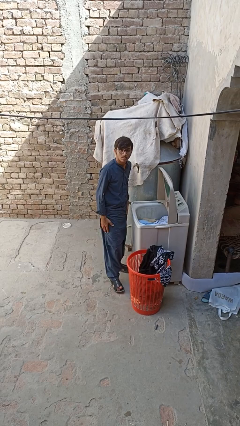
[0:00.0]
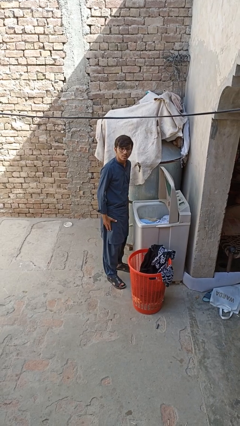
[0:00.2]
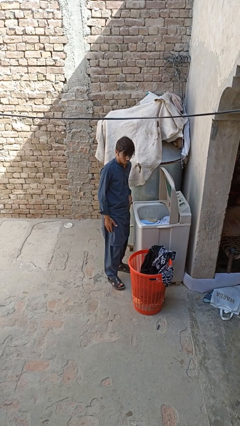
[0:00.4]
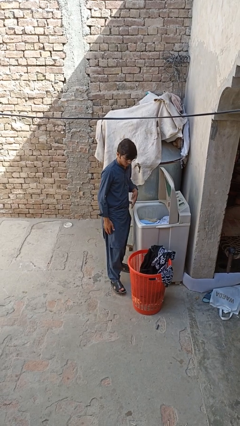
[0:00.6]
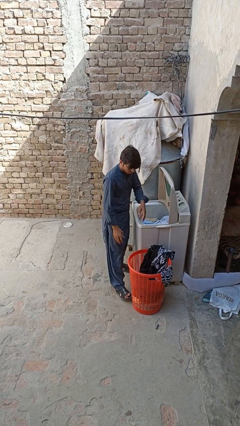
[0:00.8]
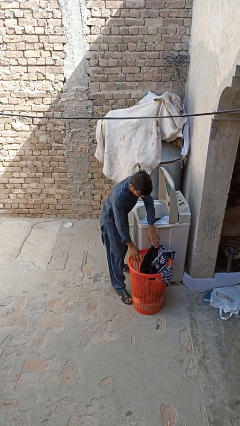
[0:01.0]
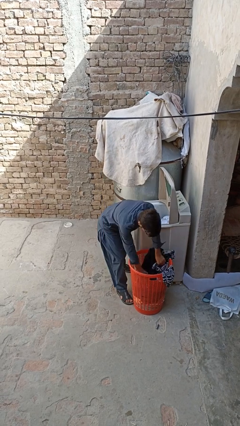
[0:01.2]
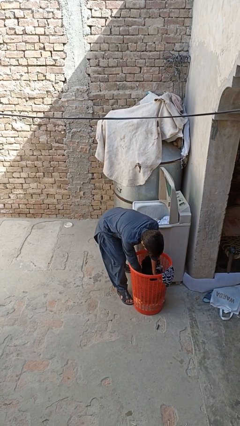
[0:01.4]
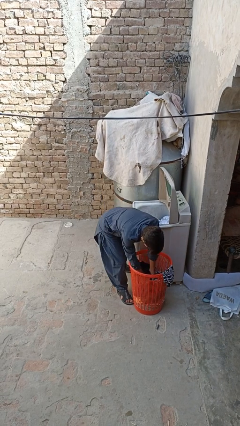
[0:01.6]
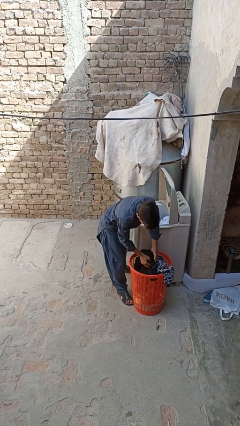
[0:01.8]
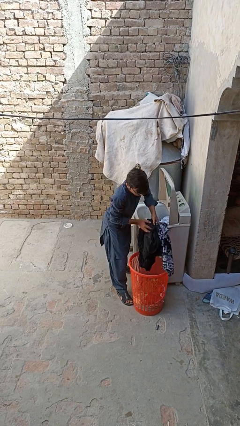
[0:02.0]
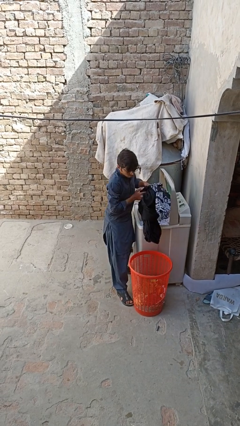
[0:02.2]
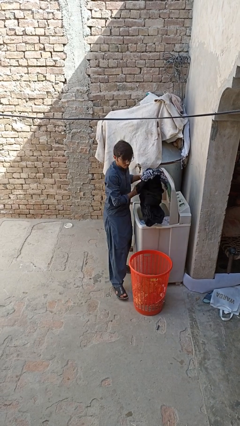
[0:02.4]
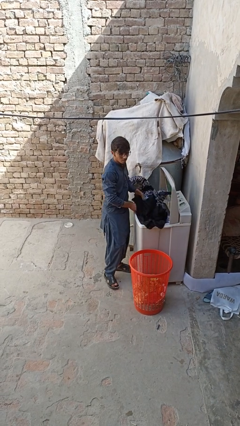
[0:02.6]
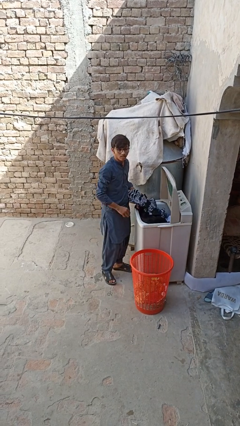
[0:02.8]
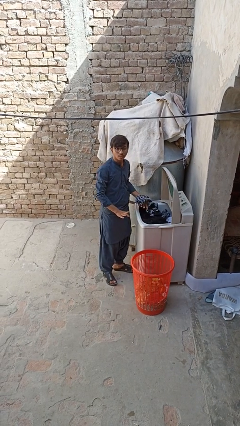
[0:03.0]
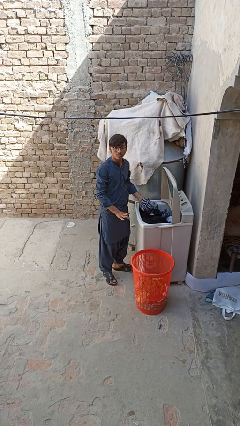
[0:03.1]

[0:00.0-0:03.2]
person loads clotheswasher

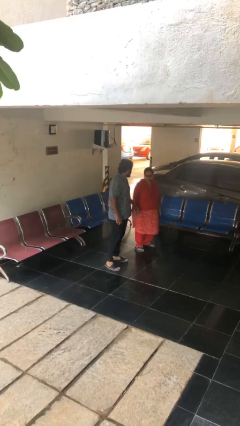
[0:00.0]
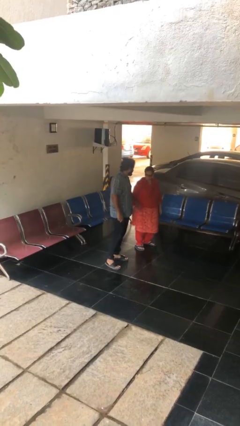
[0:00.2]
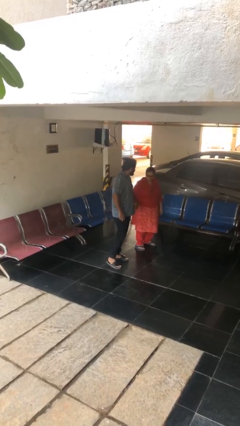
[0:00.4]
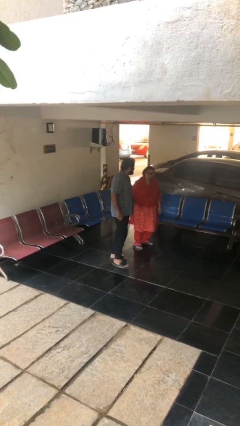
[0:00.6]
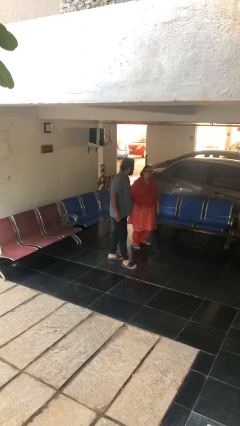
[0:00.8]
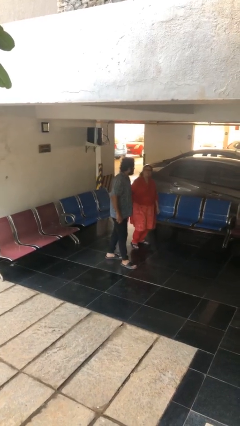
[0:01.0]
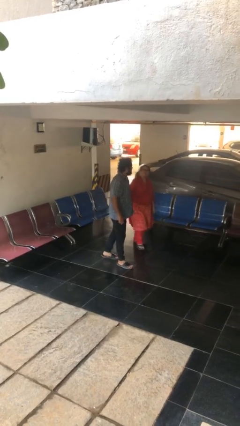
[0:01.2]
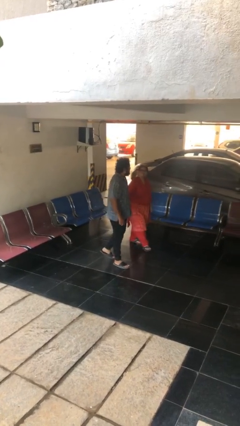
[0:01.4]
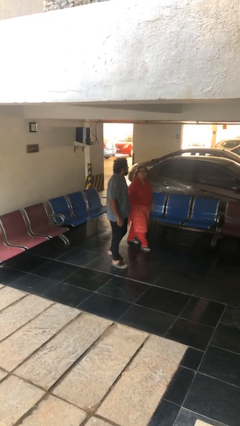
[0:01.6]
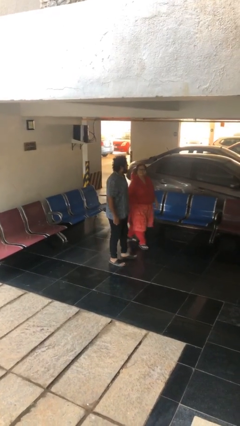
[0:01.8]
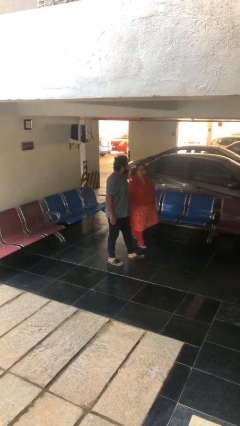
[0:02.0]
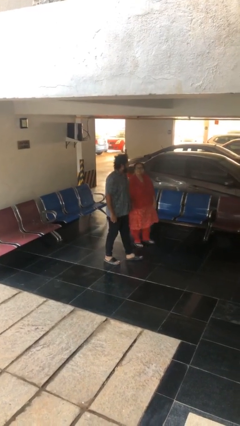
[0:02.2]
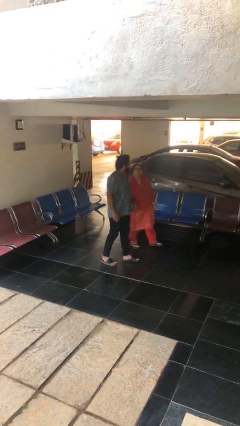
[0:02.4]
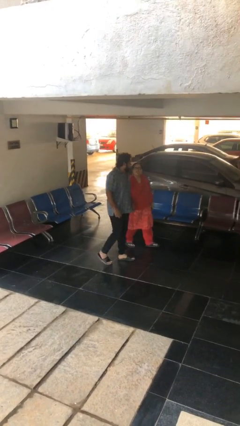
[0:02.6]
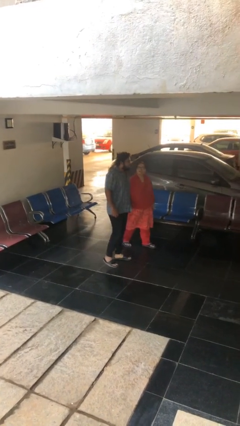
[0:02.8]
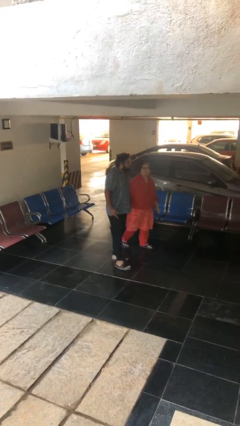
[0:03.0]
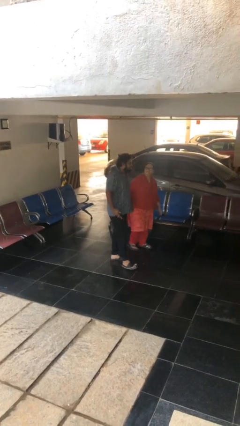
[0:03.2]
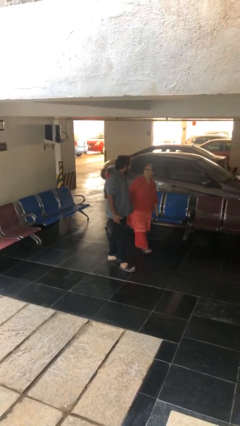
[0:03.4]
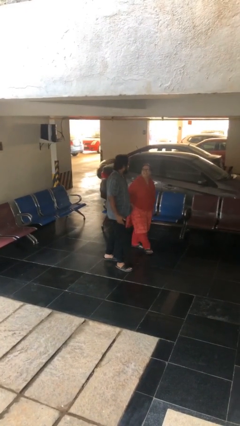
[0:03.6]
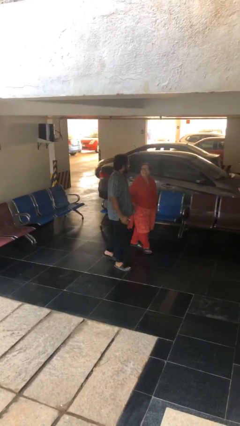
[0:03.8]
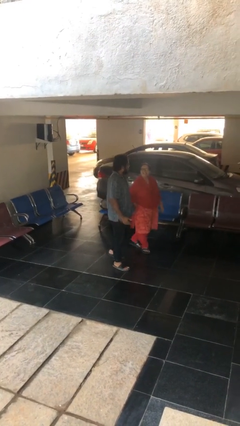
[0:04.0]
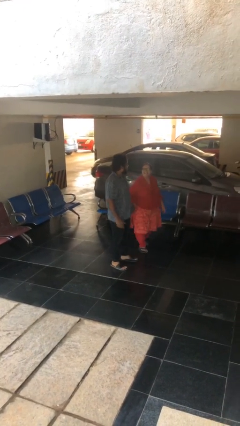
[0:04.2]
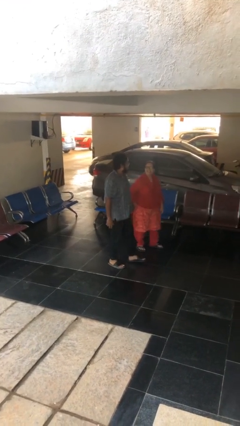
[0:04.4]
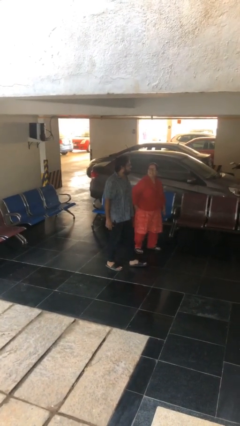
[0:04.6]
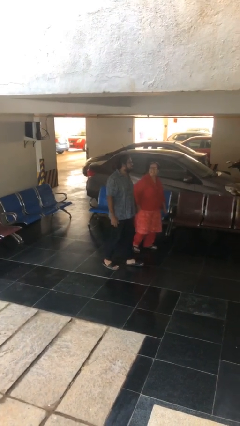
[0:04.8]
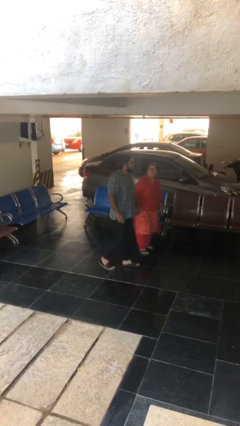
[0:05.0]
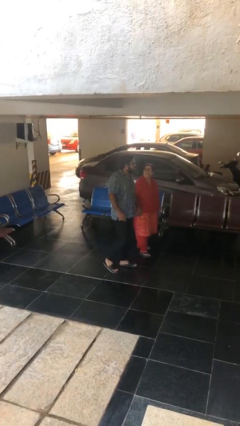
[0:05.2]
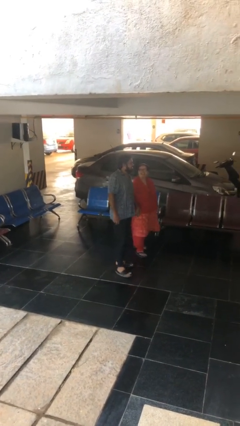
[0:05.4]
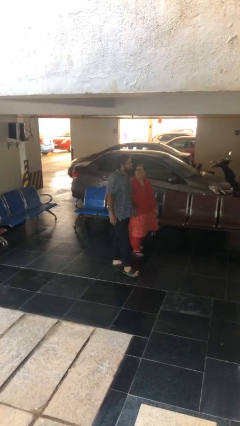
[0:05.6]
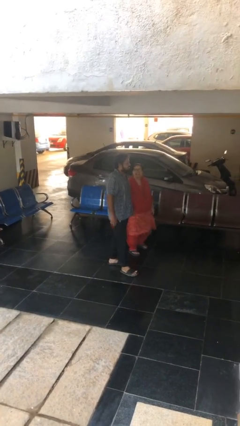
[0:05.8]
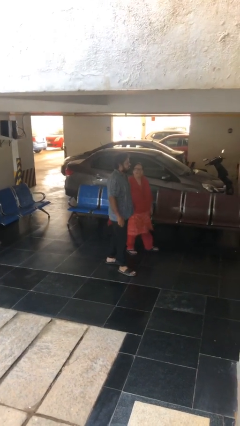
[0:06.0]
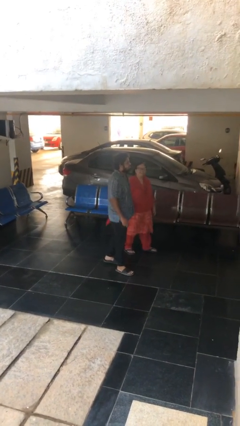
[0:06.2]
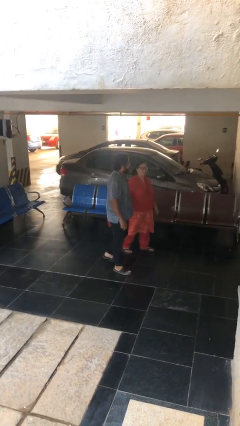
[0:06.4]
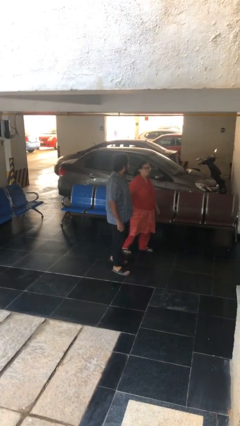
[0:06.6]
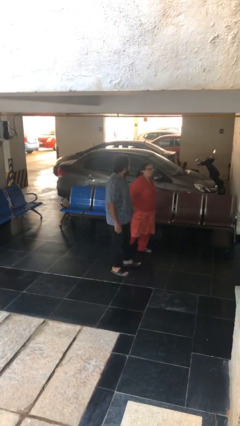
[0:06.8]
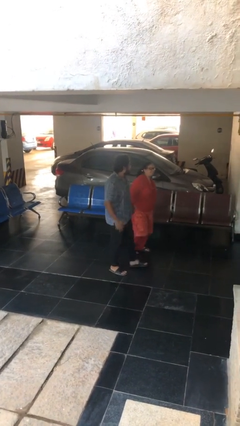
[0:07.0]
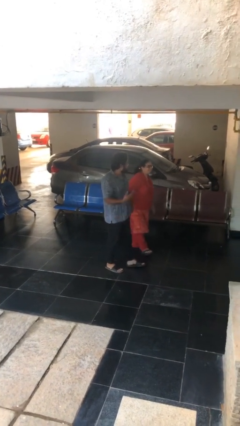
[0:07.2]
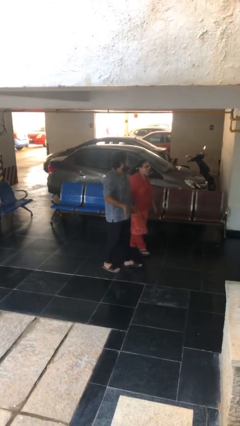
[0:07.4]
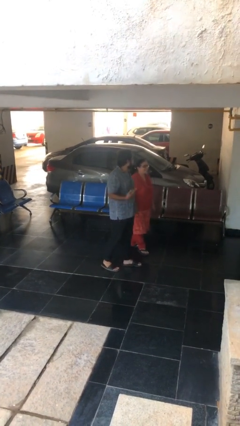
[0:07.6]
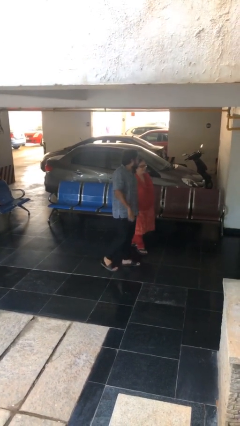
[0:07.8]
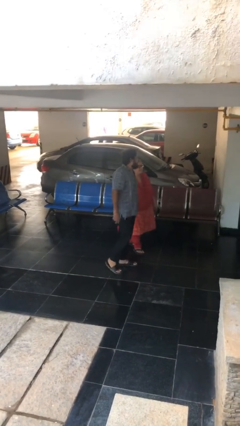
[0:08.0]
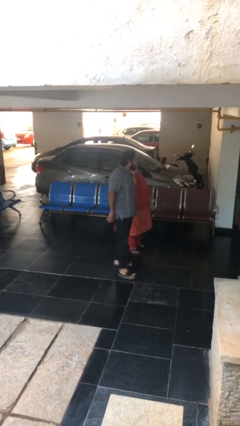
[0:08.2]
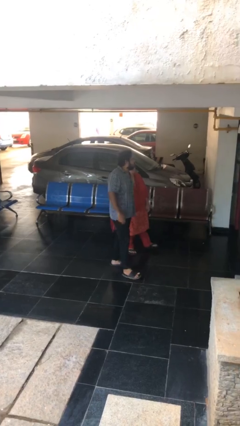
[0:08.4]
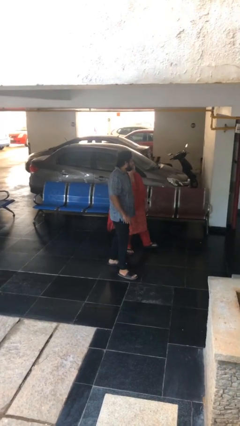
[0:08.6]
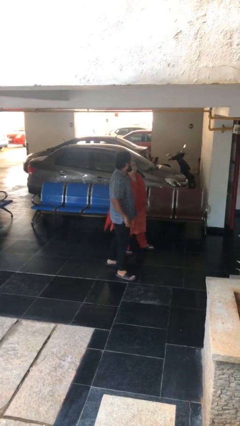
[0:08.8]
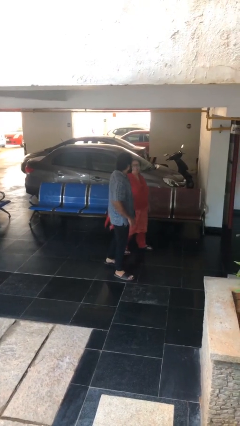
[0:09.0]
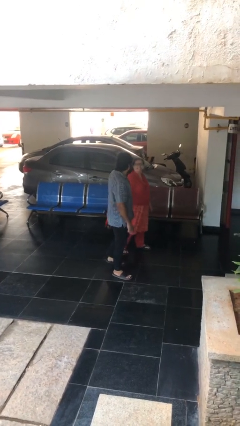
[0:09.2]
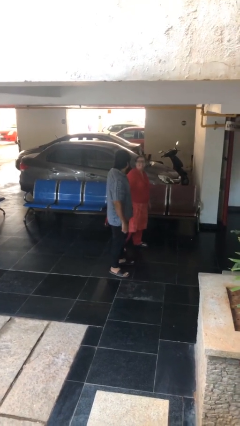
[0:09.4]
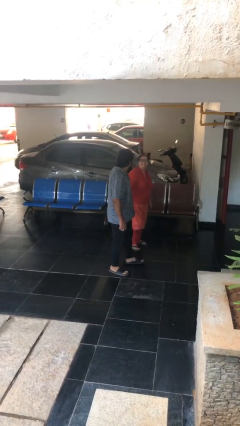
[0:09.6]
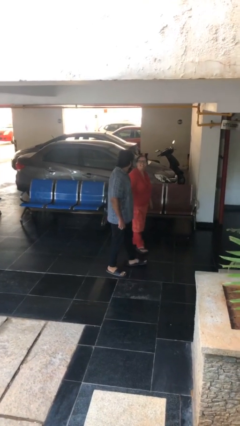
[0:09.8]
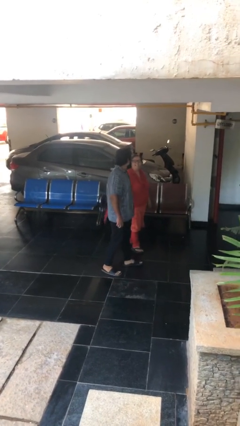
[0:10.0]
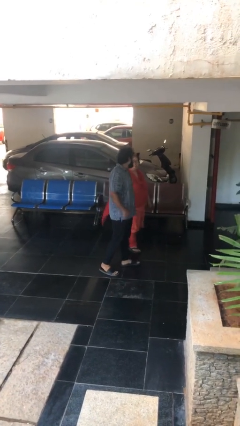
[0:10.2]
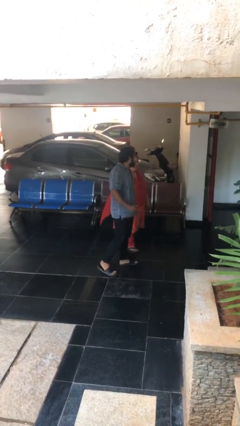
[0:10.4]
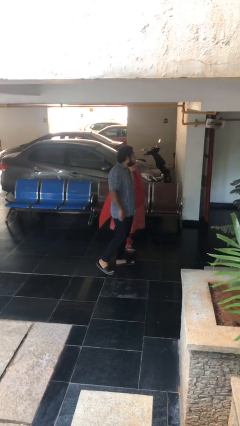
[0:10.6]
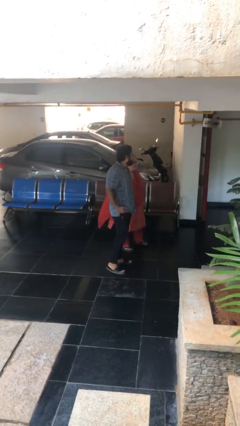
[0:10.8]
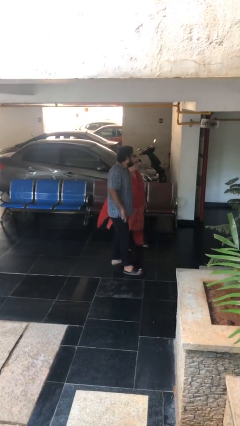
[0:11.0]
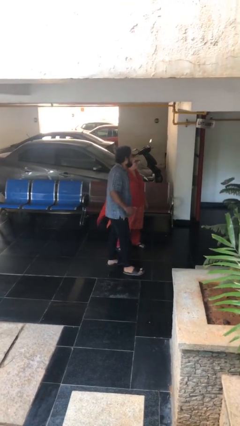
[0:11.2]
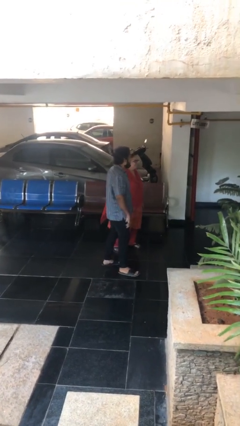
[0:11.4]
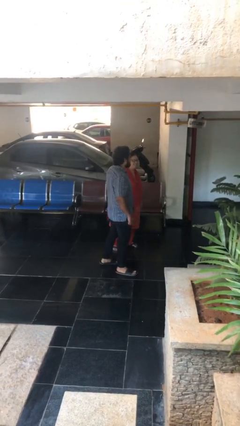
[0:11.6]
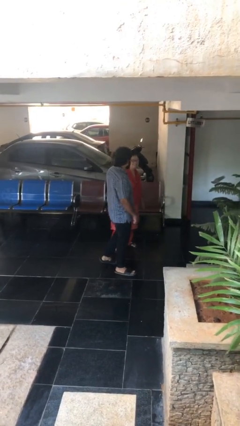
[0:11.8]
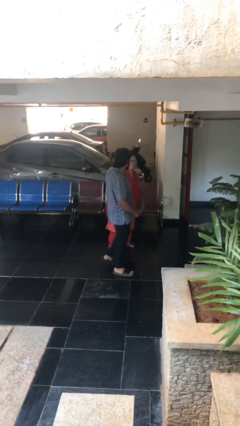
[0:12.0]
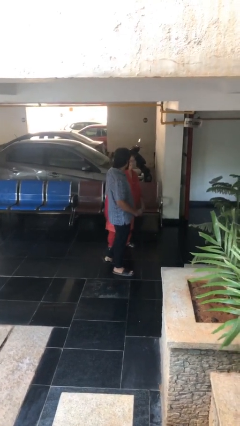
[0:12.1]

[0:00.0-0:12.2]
person holds hand

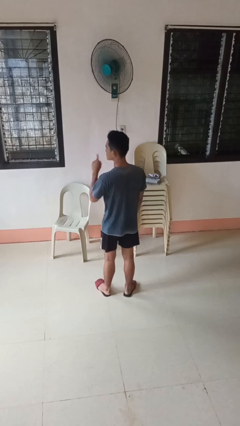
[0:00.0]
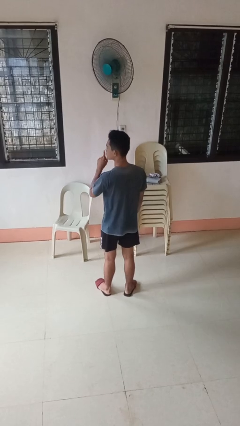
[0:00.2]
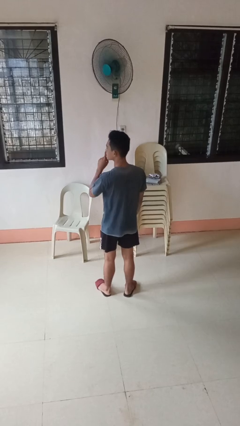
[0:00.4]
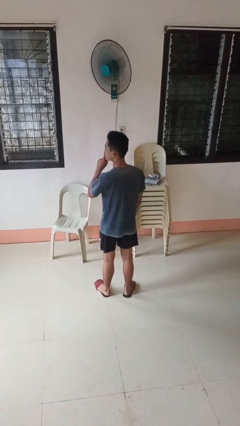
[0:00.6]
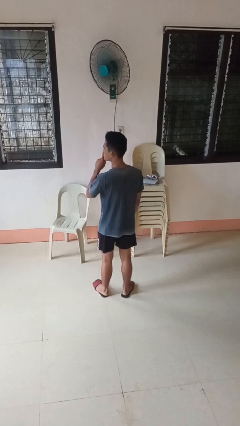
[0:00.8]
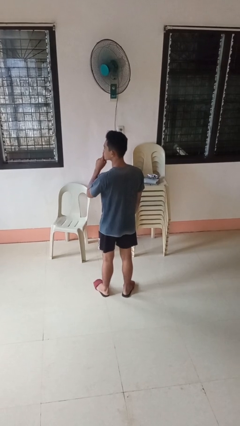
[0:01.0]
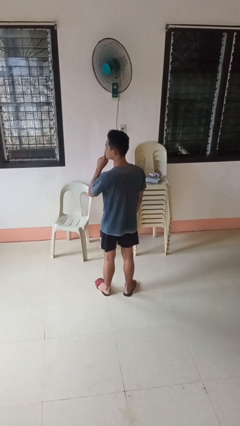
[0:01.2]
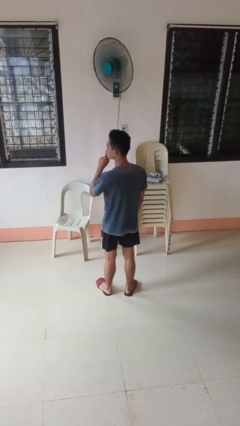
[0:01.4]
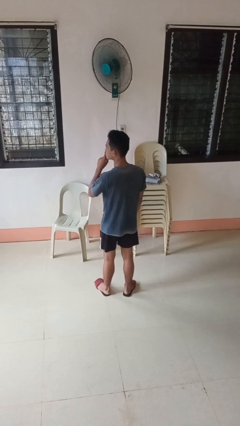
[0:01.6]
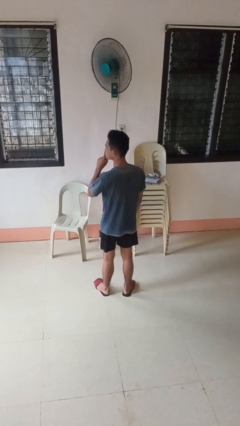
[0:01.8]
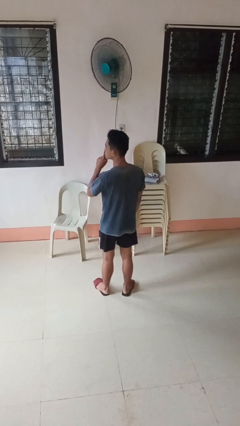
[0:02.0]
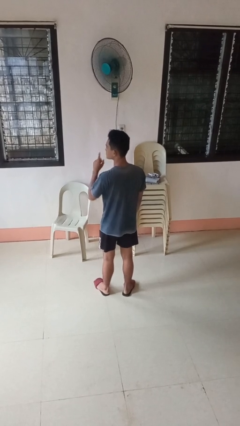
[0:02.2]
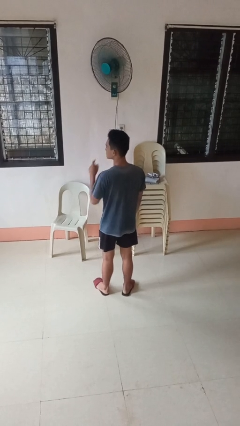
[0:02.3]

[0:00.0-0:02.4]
person gestures be quiet

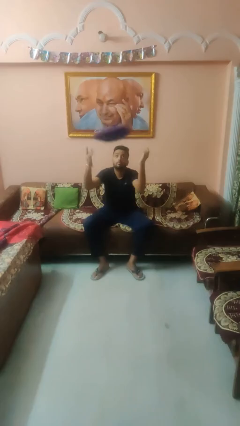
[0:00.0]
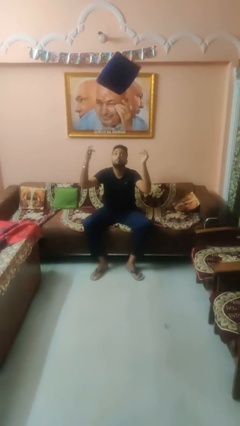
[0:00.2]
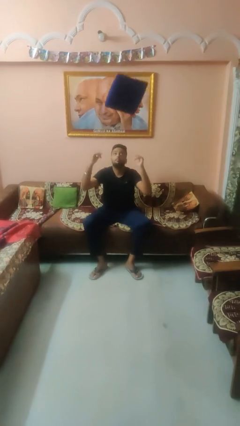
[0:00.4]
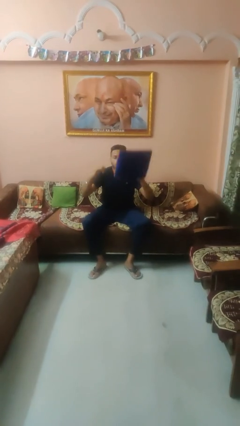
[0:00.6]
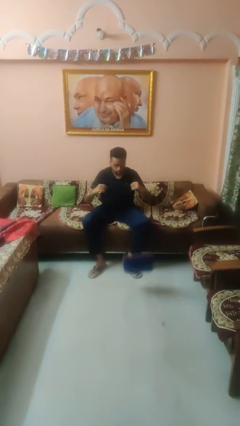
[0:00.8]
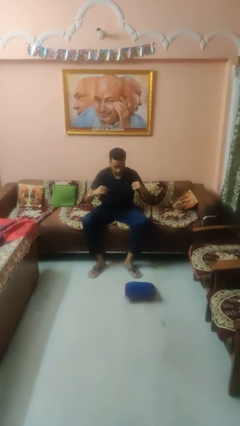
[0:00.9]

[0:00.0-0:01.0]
person throws object into air
